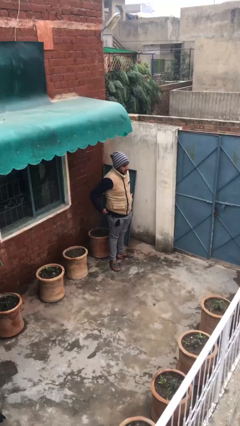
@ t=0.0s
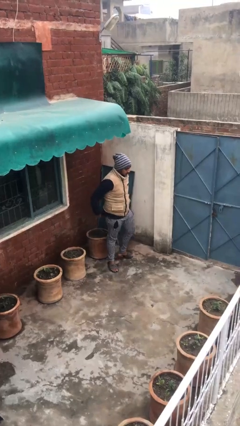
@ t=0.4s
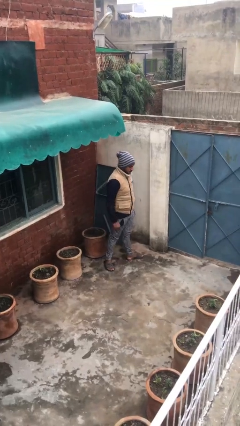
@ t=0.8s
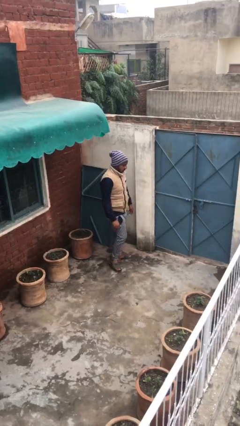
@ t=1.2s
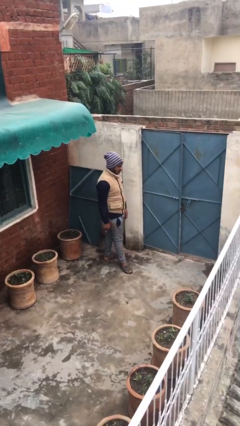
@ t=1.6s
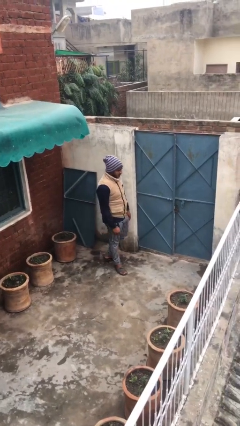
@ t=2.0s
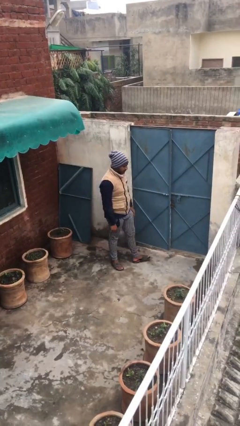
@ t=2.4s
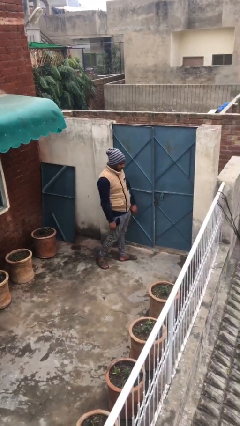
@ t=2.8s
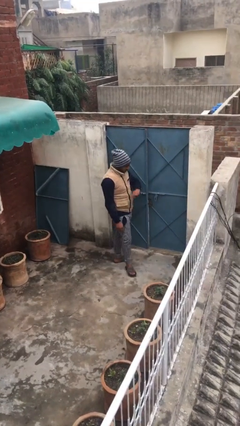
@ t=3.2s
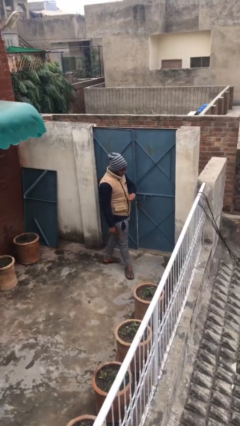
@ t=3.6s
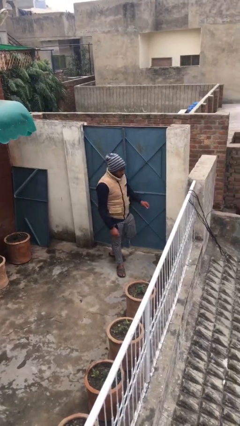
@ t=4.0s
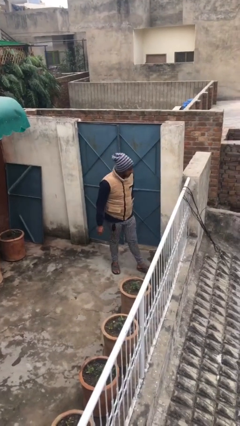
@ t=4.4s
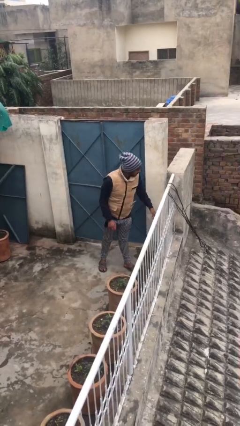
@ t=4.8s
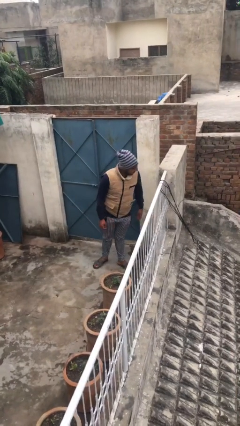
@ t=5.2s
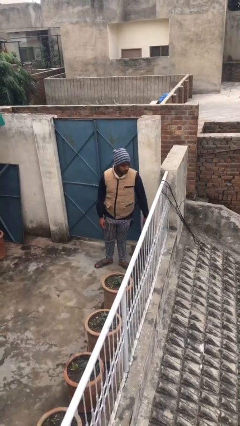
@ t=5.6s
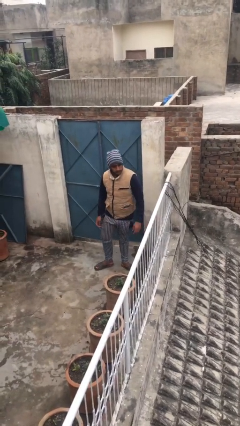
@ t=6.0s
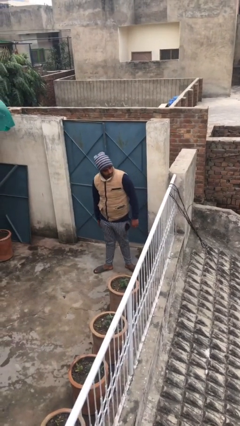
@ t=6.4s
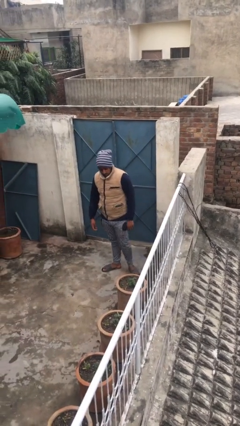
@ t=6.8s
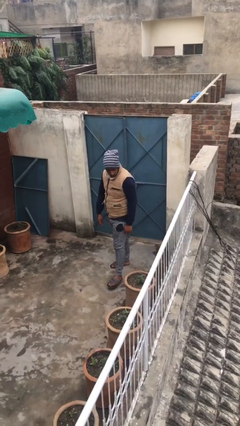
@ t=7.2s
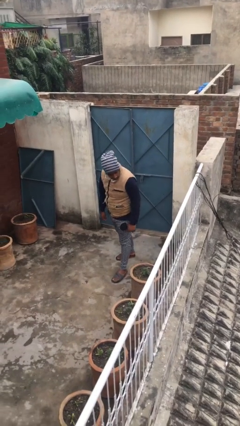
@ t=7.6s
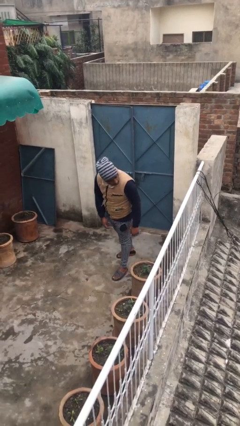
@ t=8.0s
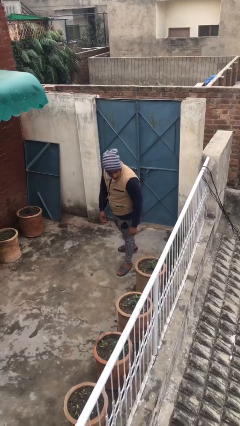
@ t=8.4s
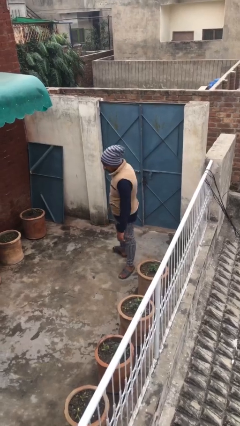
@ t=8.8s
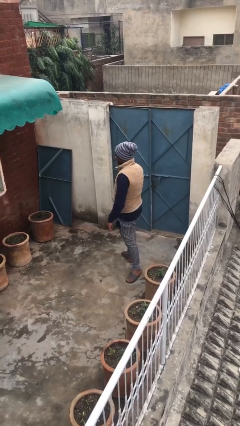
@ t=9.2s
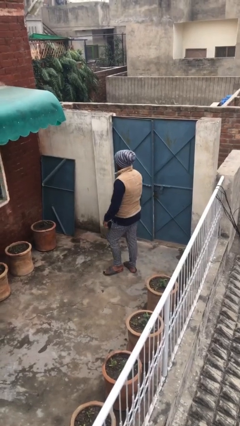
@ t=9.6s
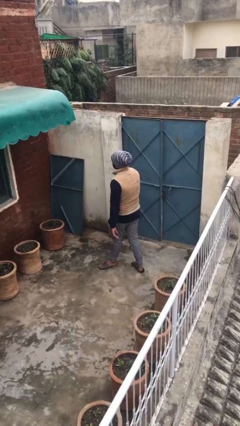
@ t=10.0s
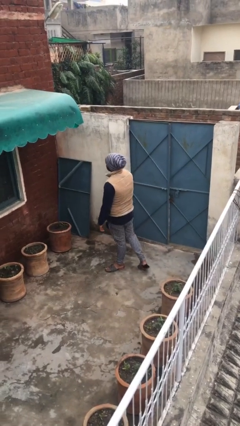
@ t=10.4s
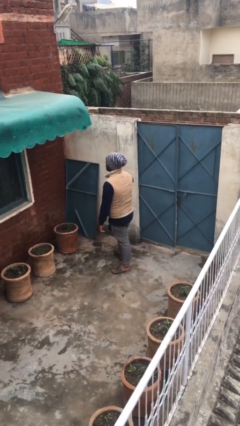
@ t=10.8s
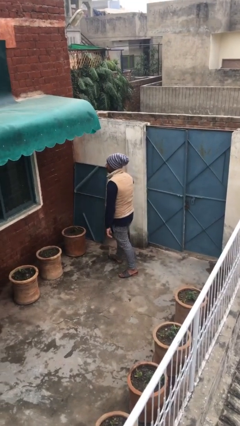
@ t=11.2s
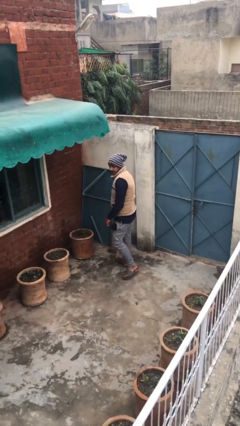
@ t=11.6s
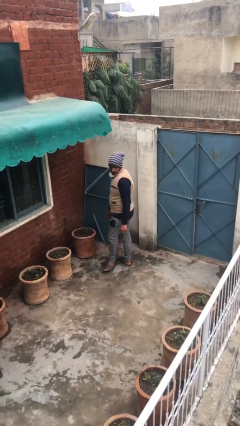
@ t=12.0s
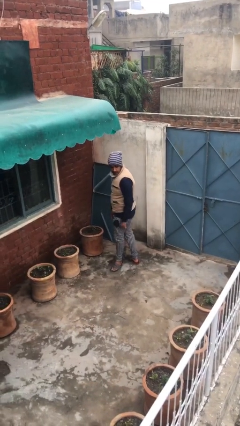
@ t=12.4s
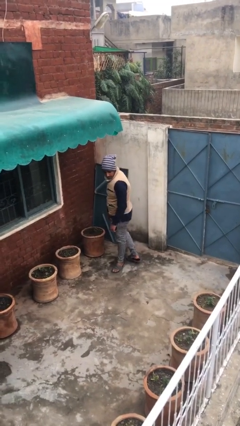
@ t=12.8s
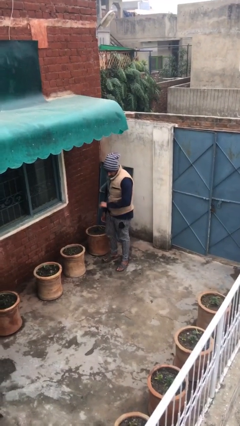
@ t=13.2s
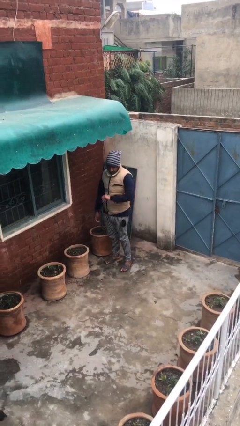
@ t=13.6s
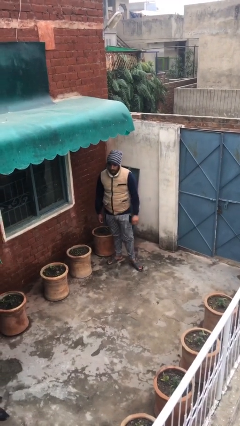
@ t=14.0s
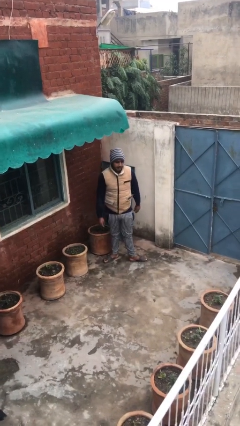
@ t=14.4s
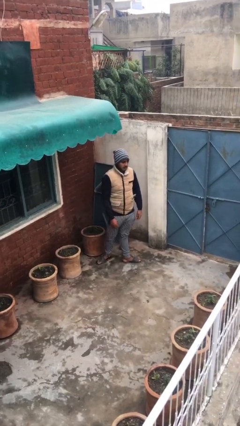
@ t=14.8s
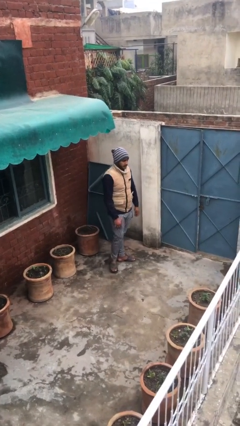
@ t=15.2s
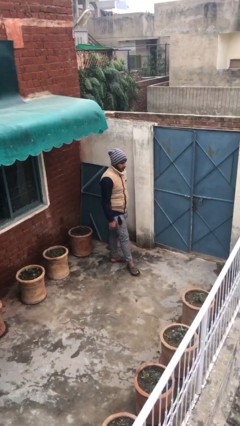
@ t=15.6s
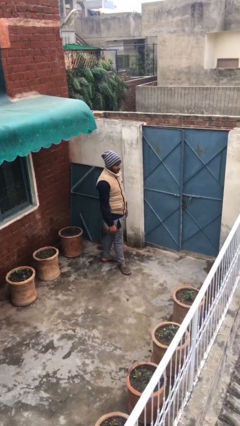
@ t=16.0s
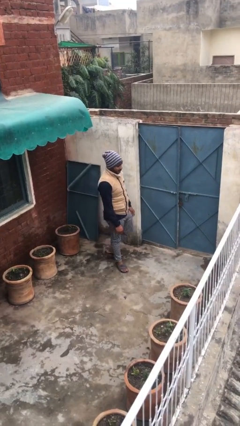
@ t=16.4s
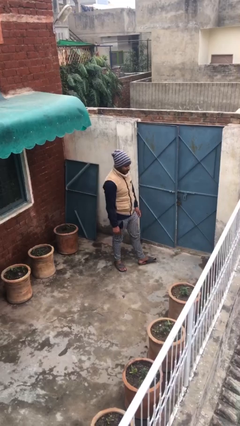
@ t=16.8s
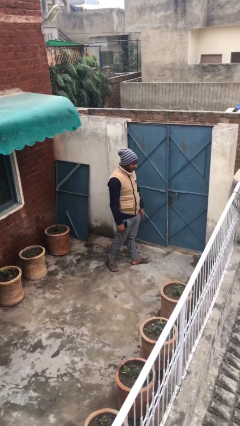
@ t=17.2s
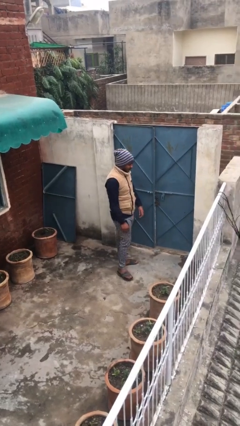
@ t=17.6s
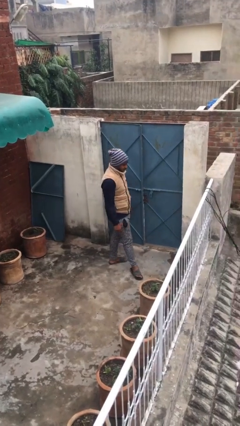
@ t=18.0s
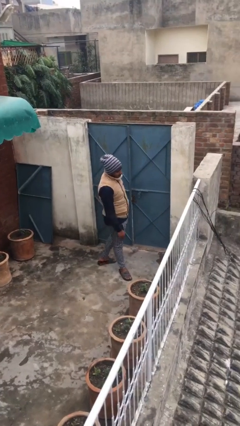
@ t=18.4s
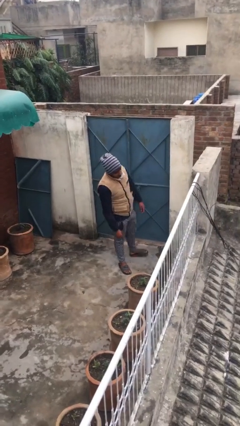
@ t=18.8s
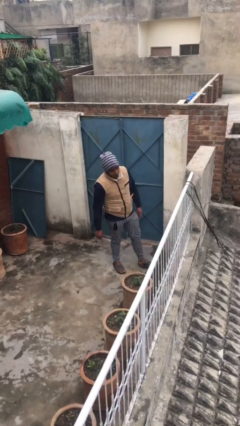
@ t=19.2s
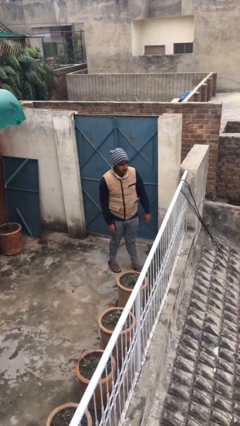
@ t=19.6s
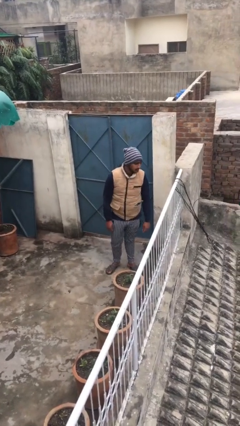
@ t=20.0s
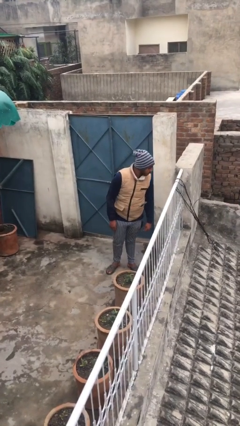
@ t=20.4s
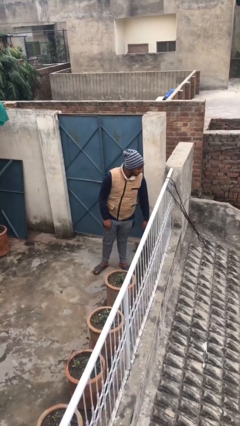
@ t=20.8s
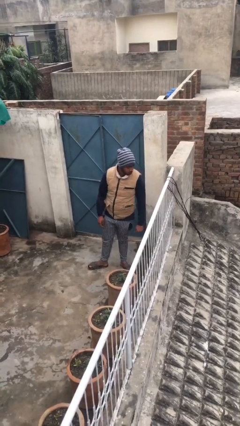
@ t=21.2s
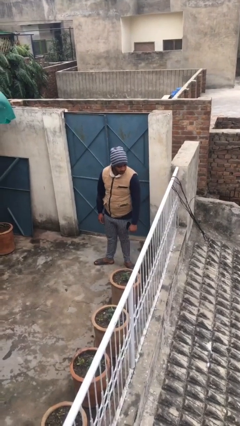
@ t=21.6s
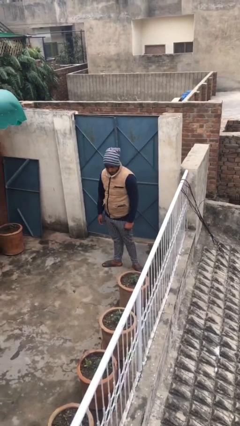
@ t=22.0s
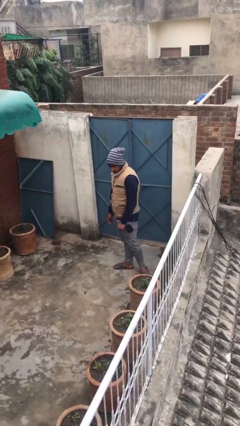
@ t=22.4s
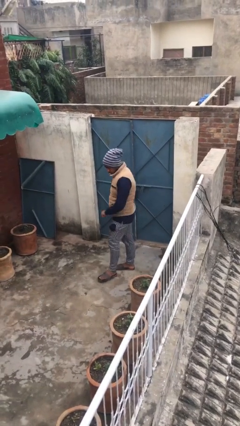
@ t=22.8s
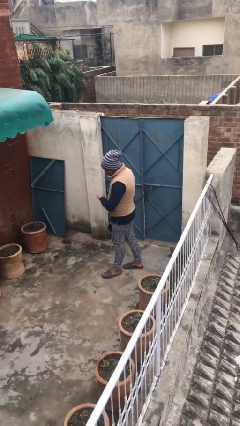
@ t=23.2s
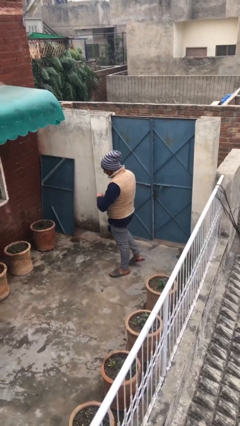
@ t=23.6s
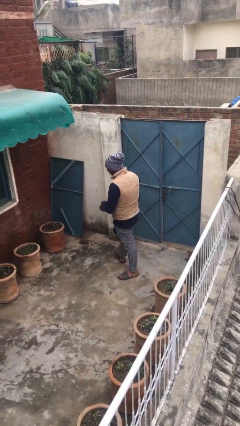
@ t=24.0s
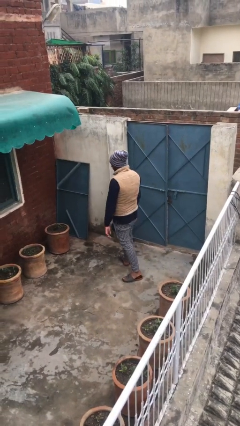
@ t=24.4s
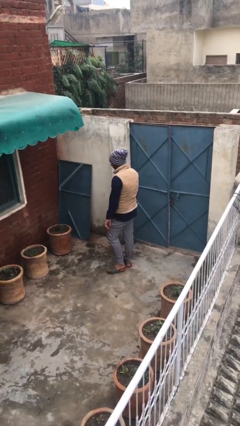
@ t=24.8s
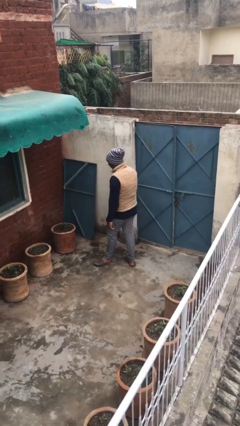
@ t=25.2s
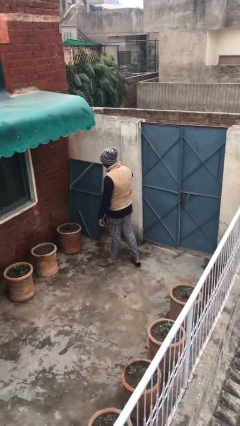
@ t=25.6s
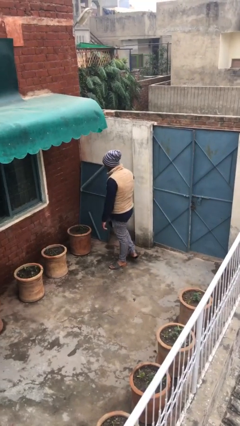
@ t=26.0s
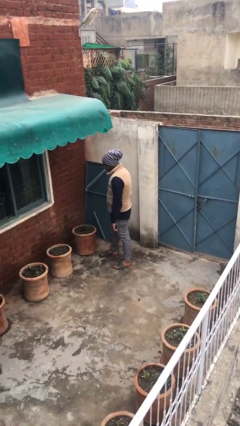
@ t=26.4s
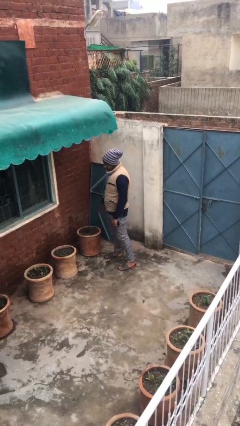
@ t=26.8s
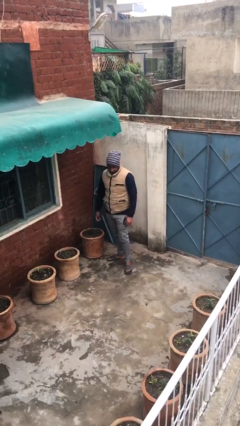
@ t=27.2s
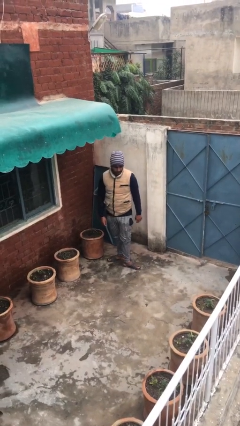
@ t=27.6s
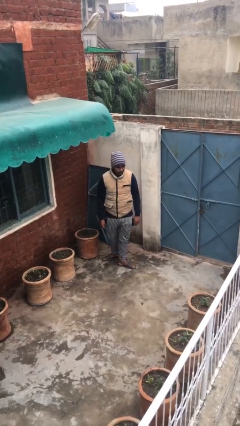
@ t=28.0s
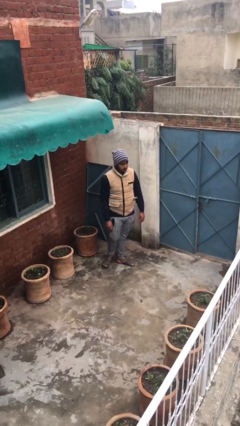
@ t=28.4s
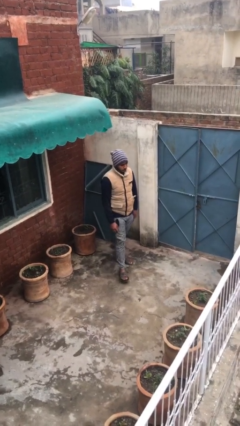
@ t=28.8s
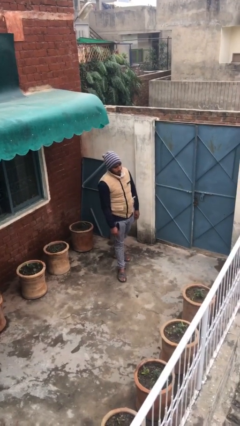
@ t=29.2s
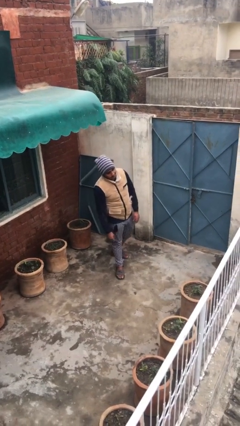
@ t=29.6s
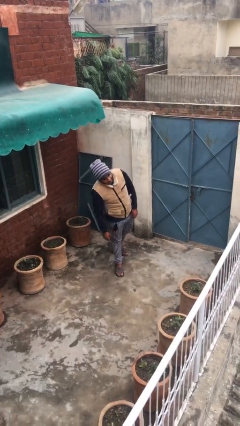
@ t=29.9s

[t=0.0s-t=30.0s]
person walks

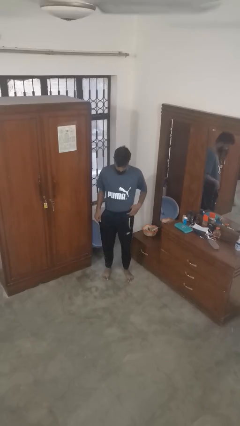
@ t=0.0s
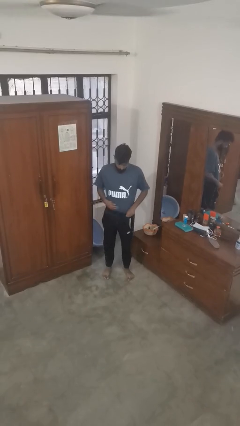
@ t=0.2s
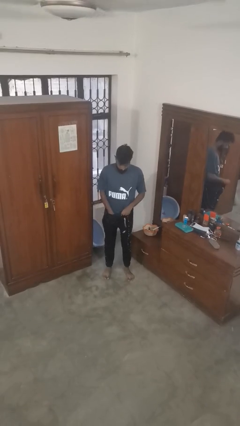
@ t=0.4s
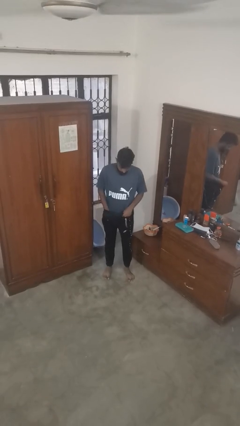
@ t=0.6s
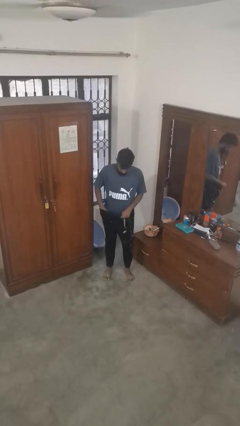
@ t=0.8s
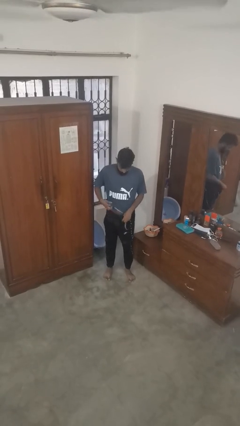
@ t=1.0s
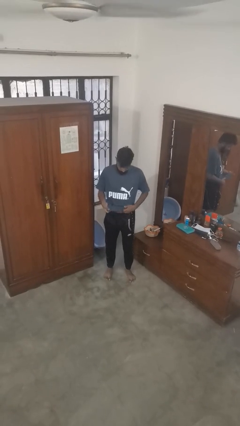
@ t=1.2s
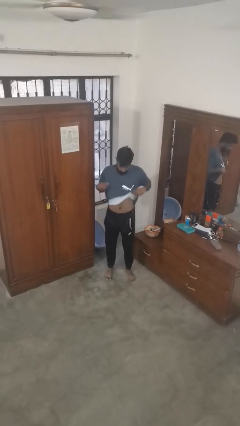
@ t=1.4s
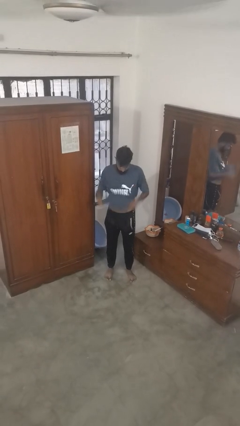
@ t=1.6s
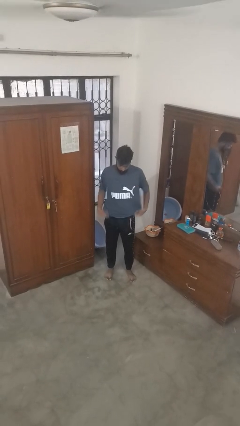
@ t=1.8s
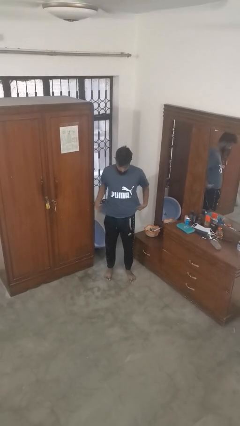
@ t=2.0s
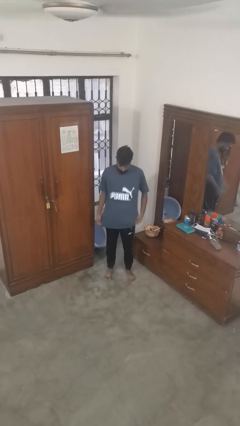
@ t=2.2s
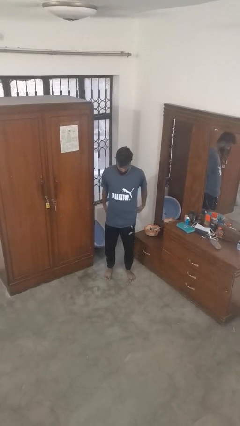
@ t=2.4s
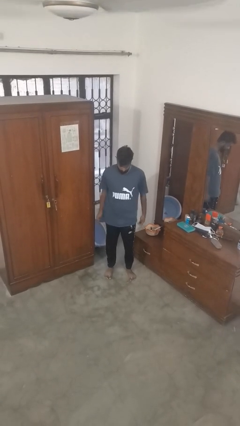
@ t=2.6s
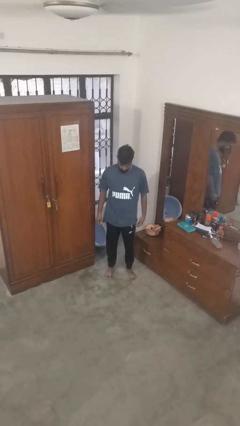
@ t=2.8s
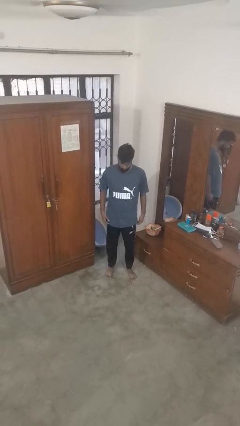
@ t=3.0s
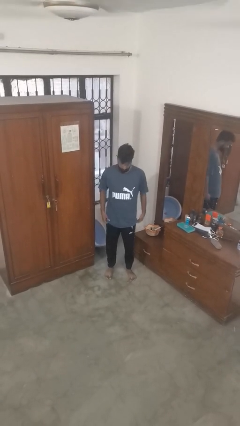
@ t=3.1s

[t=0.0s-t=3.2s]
person untucks shirt
